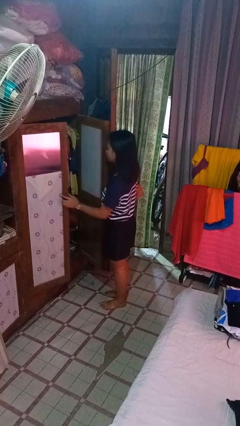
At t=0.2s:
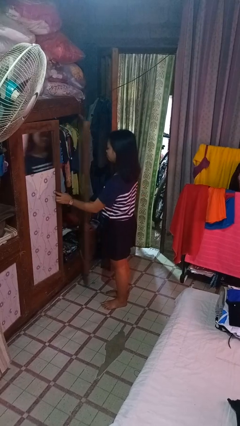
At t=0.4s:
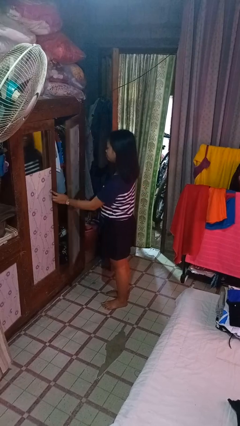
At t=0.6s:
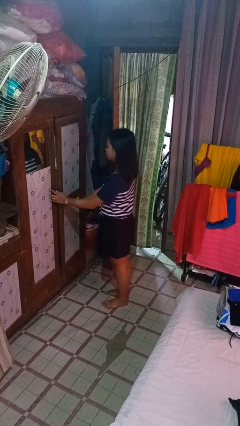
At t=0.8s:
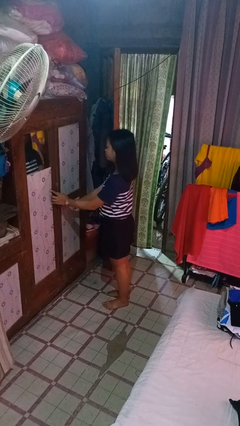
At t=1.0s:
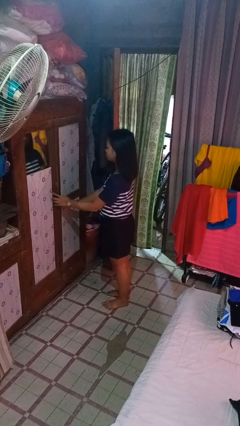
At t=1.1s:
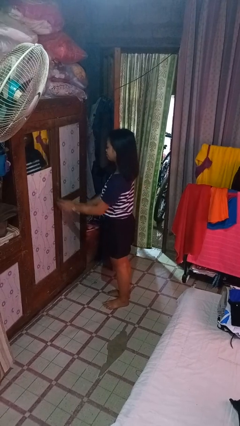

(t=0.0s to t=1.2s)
person closes closet door

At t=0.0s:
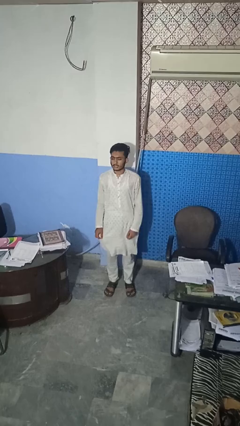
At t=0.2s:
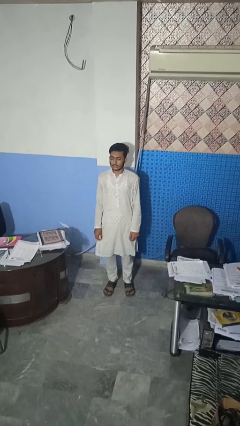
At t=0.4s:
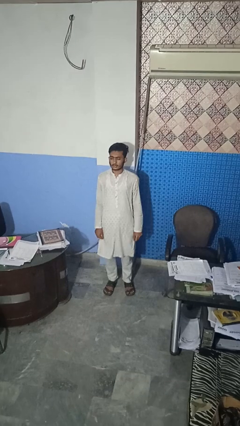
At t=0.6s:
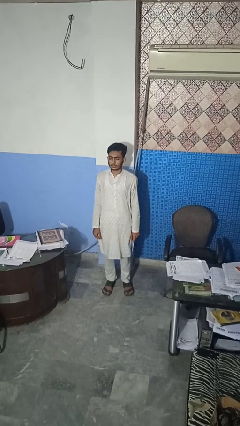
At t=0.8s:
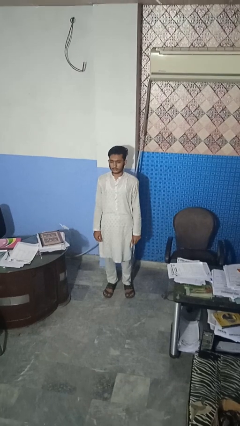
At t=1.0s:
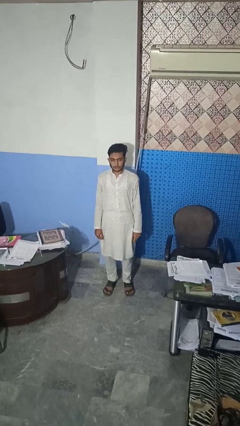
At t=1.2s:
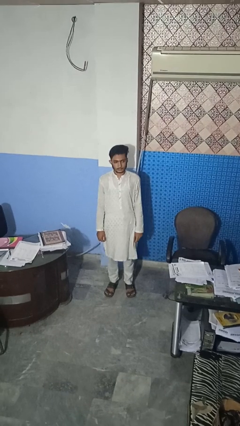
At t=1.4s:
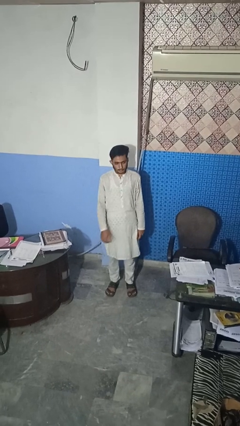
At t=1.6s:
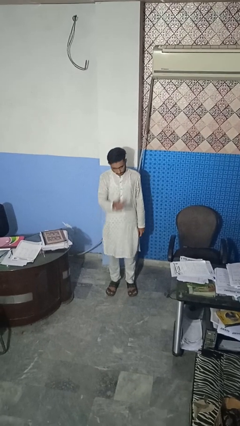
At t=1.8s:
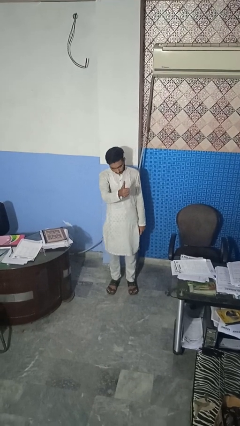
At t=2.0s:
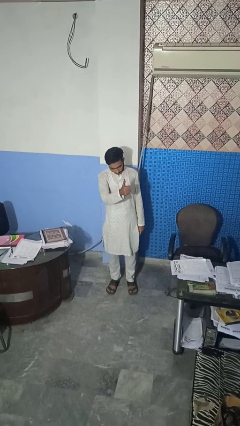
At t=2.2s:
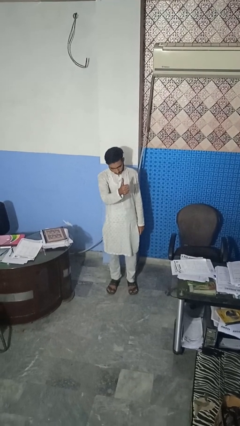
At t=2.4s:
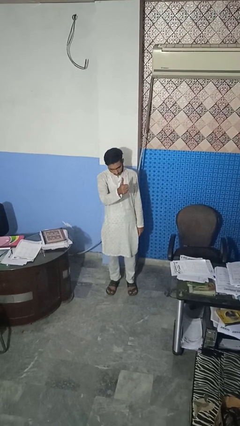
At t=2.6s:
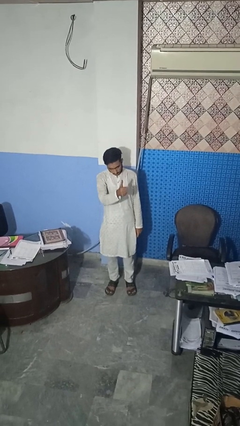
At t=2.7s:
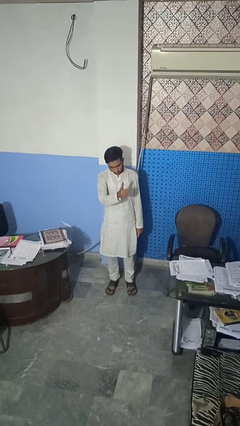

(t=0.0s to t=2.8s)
person gestures thumbs up

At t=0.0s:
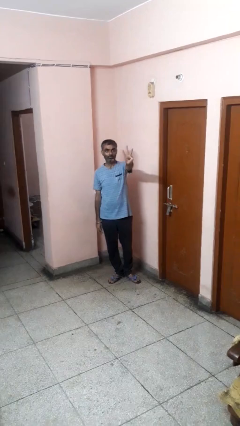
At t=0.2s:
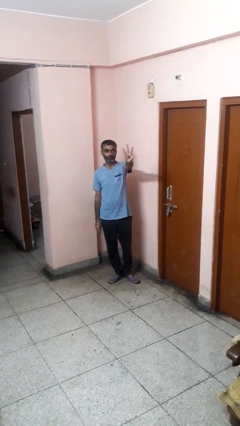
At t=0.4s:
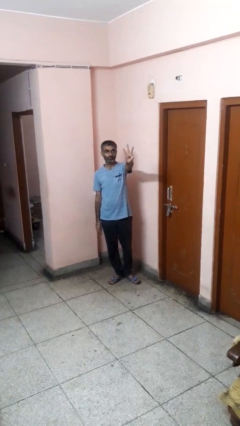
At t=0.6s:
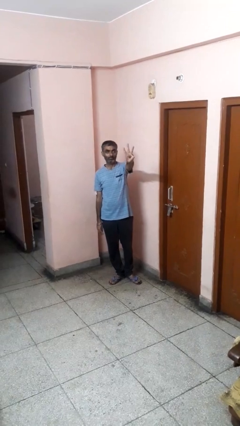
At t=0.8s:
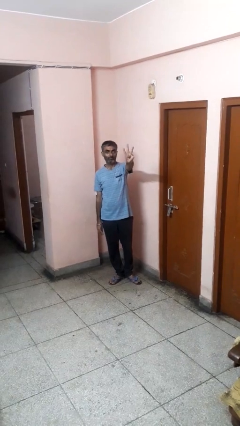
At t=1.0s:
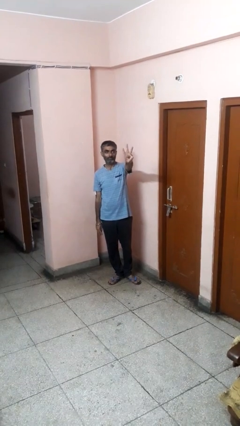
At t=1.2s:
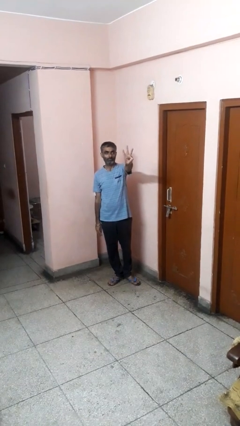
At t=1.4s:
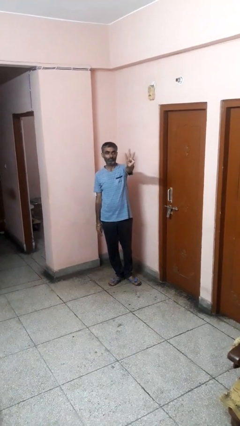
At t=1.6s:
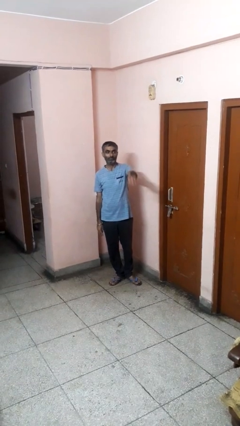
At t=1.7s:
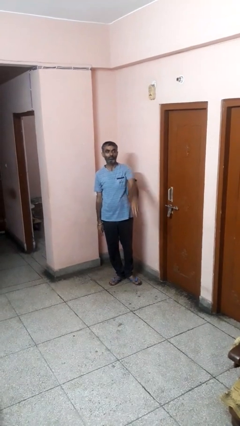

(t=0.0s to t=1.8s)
person gestures number three

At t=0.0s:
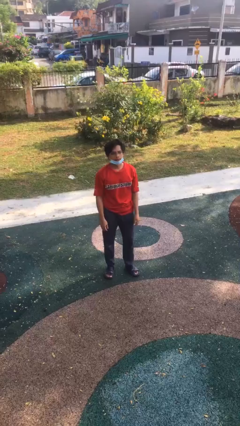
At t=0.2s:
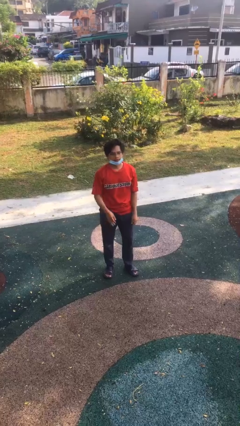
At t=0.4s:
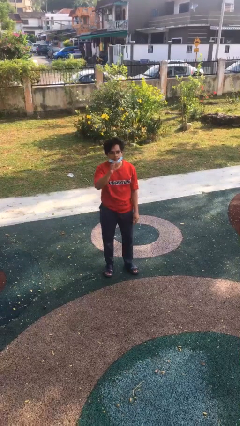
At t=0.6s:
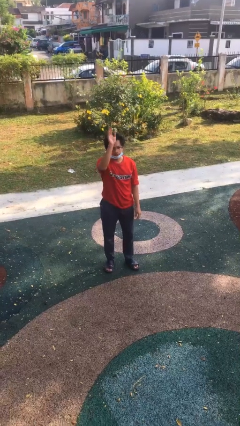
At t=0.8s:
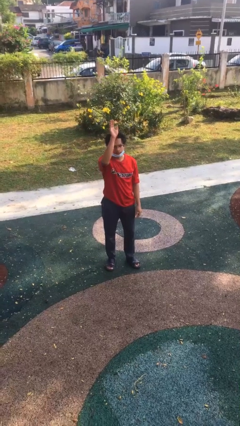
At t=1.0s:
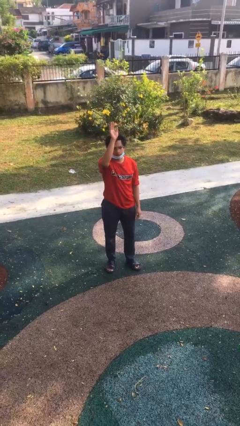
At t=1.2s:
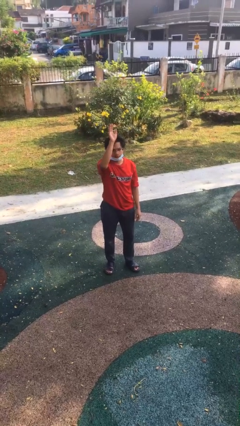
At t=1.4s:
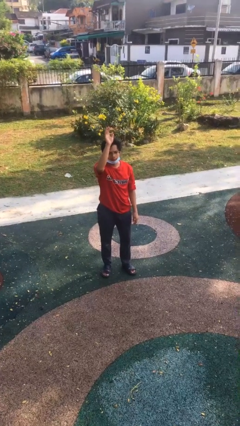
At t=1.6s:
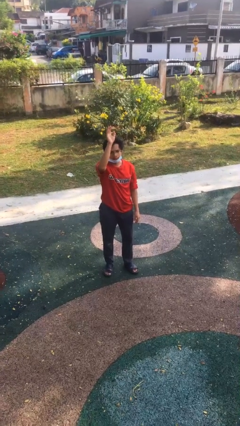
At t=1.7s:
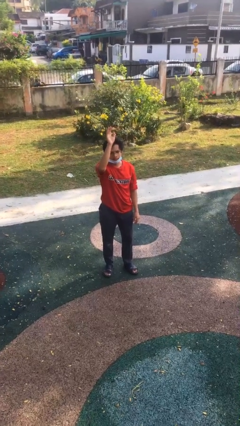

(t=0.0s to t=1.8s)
person gestures raise hand

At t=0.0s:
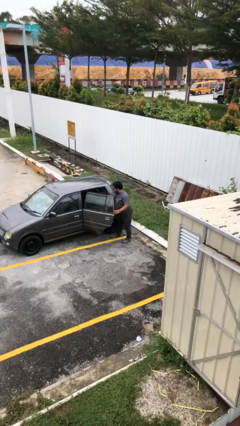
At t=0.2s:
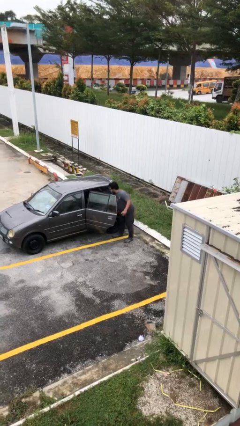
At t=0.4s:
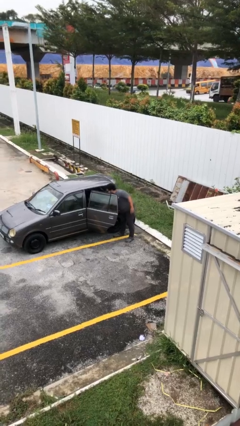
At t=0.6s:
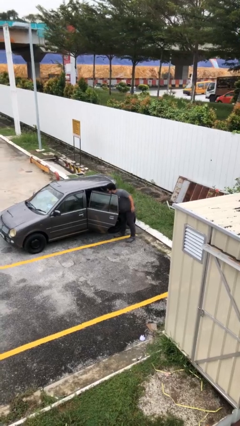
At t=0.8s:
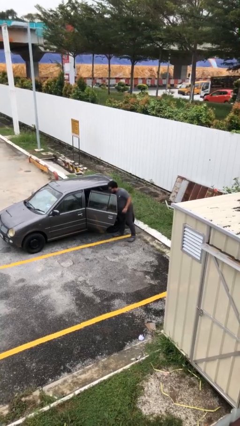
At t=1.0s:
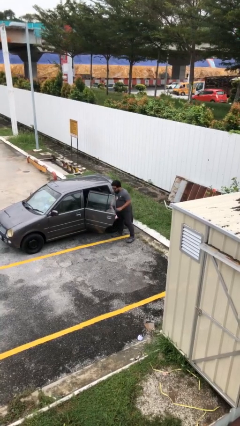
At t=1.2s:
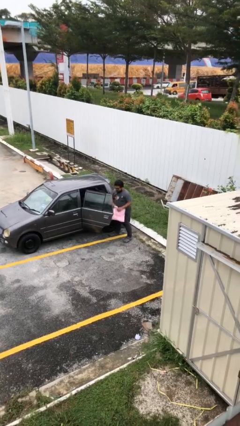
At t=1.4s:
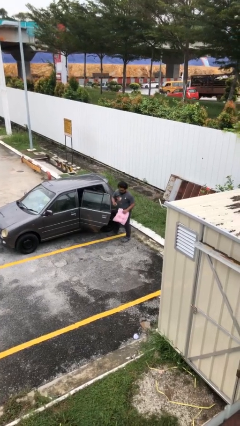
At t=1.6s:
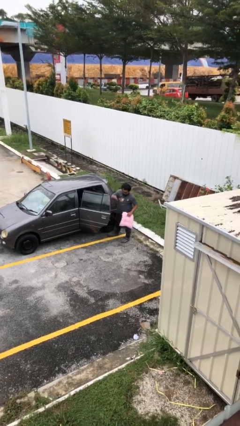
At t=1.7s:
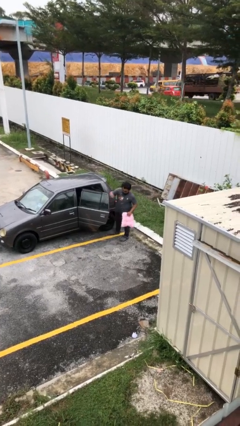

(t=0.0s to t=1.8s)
person unloads car

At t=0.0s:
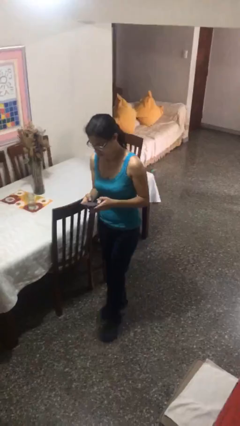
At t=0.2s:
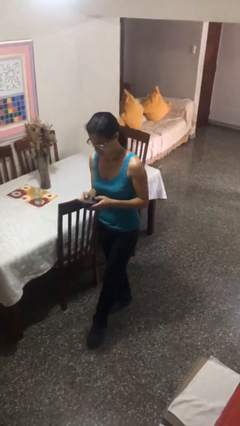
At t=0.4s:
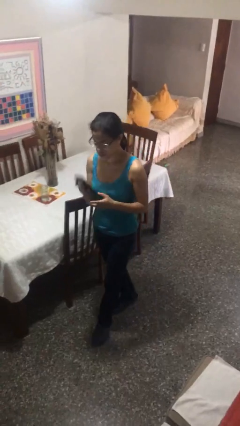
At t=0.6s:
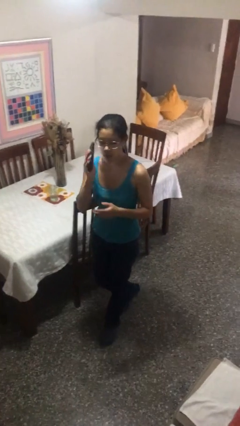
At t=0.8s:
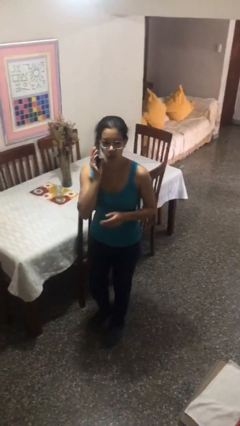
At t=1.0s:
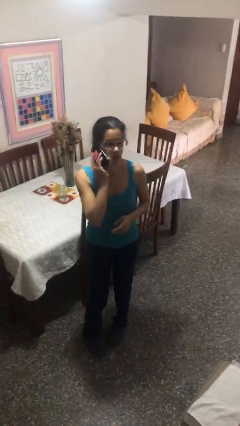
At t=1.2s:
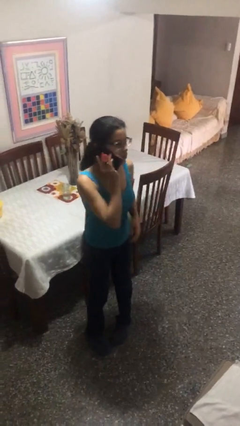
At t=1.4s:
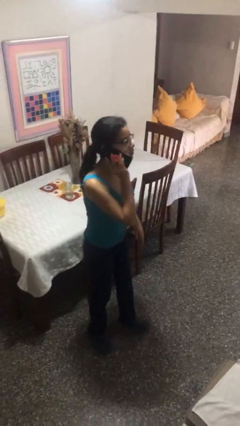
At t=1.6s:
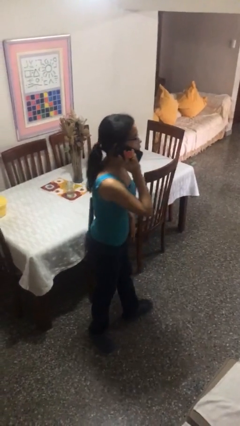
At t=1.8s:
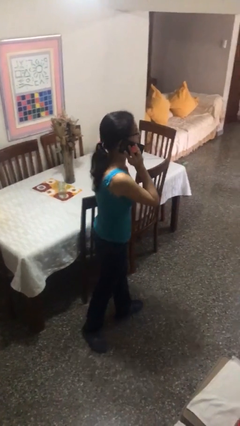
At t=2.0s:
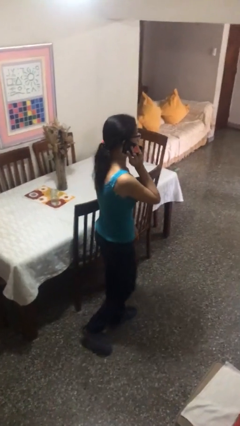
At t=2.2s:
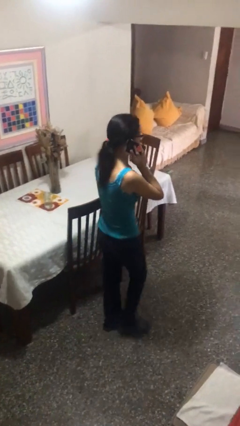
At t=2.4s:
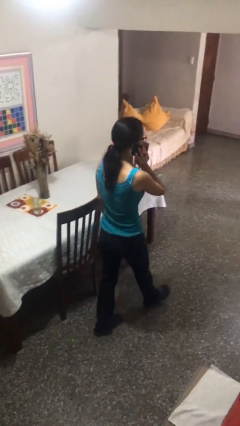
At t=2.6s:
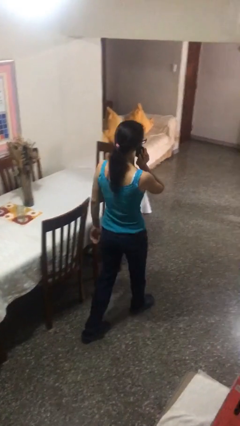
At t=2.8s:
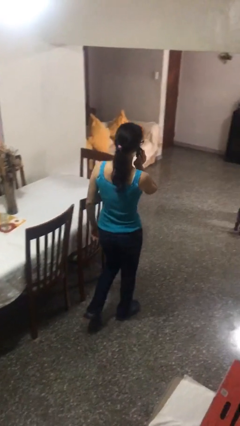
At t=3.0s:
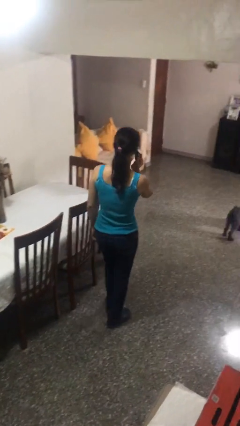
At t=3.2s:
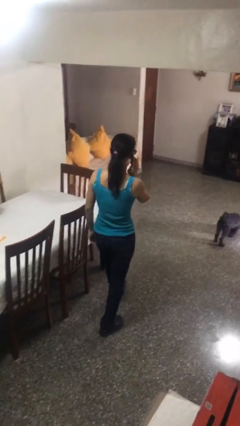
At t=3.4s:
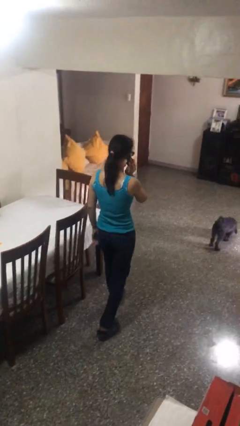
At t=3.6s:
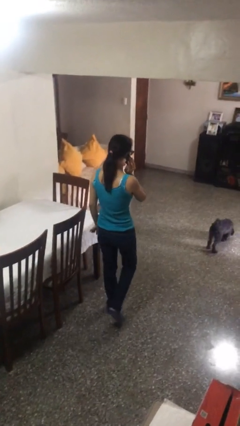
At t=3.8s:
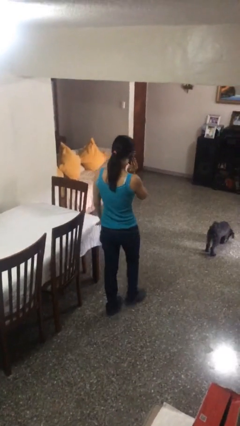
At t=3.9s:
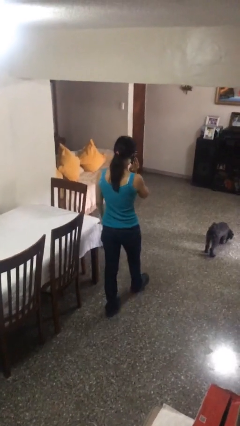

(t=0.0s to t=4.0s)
person talks on phone

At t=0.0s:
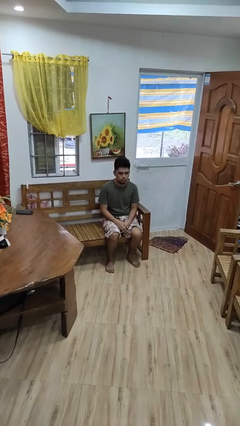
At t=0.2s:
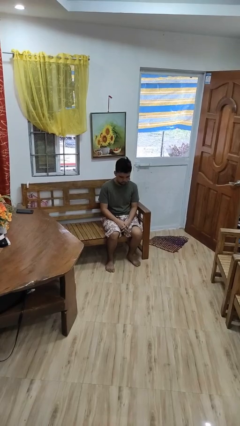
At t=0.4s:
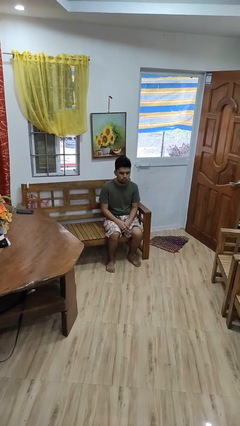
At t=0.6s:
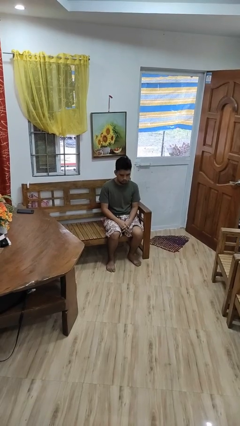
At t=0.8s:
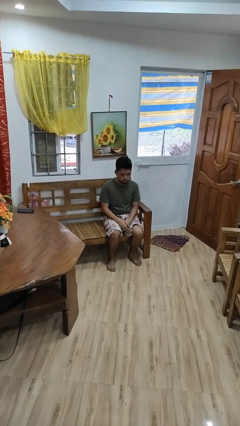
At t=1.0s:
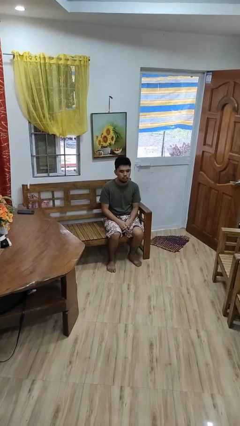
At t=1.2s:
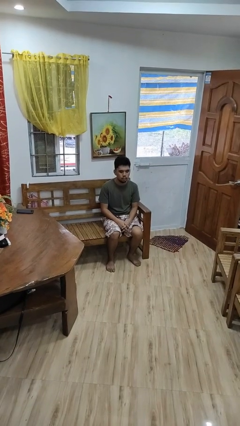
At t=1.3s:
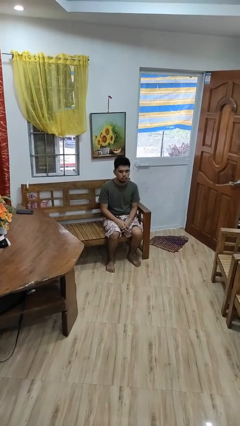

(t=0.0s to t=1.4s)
person nods head

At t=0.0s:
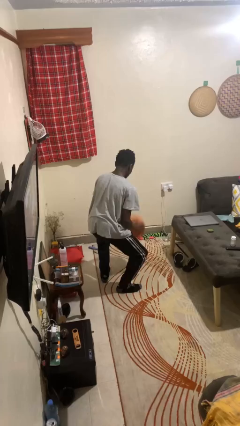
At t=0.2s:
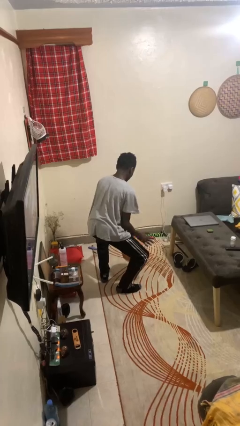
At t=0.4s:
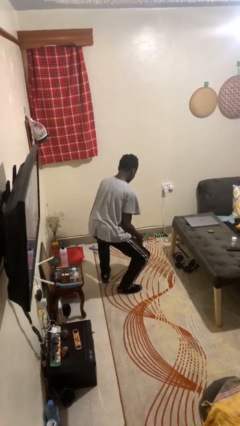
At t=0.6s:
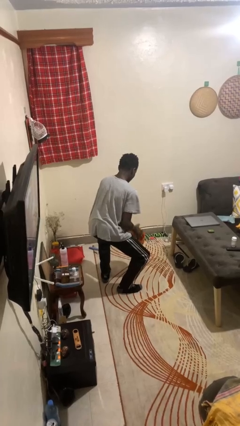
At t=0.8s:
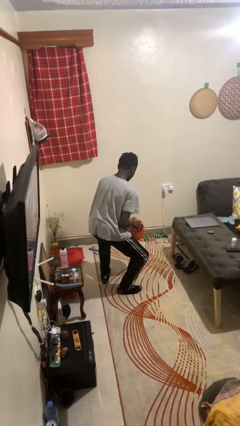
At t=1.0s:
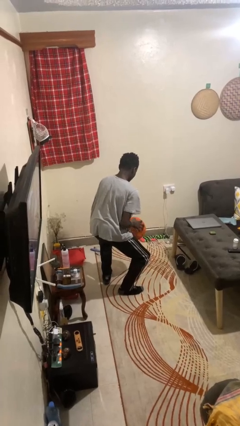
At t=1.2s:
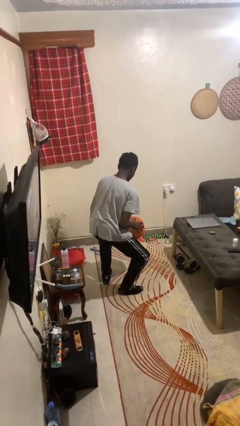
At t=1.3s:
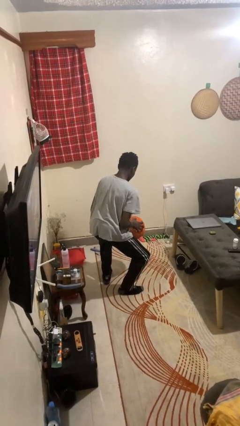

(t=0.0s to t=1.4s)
person bounces ball on floor

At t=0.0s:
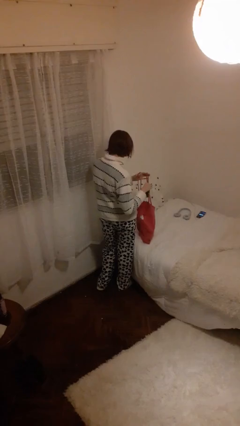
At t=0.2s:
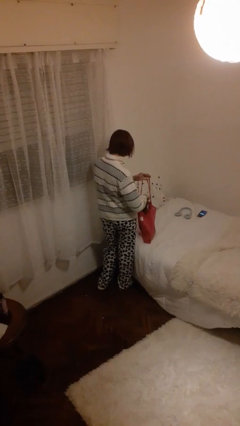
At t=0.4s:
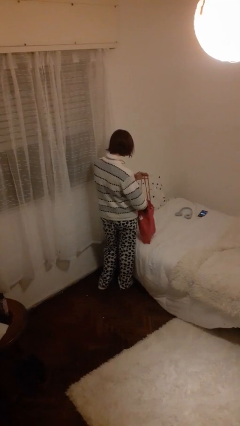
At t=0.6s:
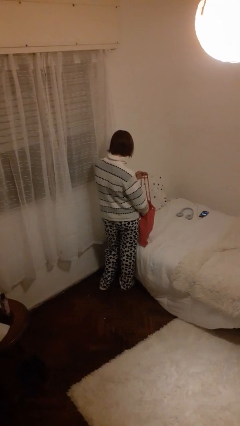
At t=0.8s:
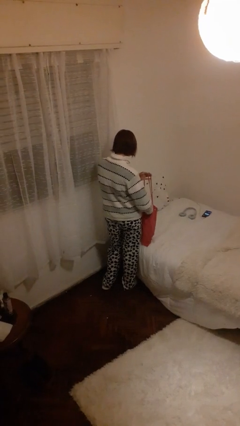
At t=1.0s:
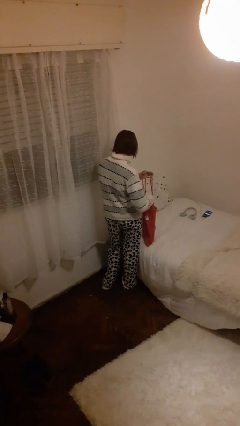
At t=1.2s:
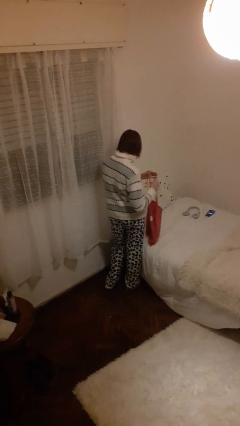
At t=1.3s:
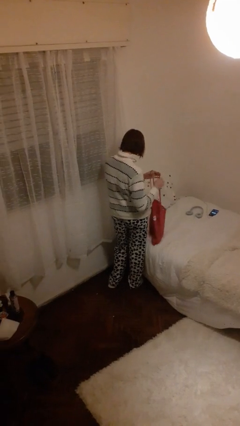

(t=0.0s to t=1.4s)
person puts object into bag
